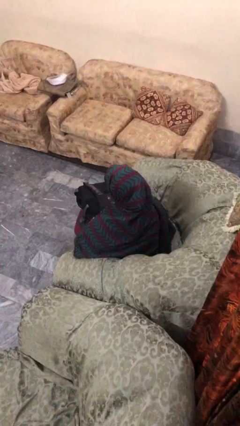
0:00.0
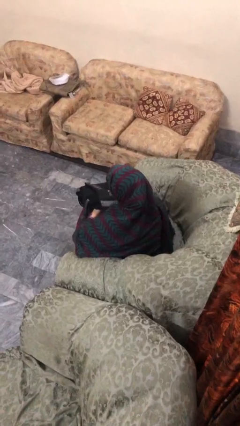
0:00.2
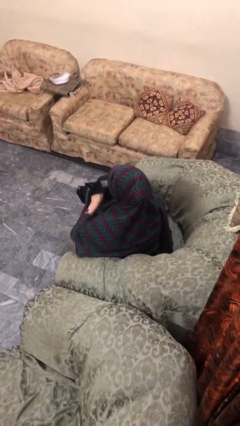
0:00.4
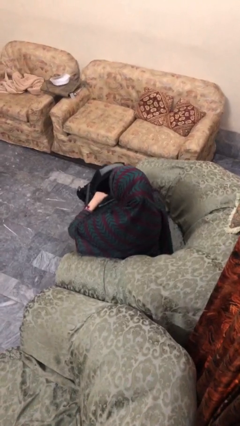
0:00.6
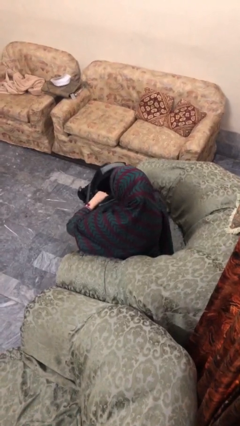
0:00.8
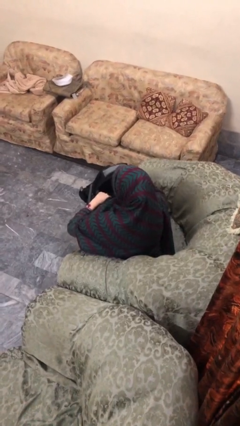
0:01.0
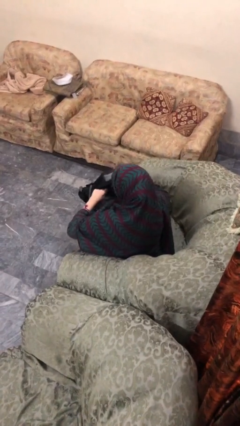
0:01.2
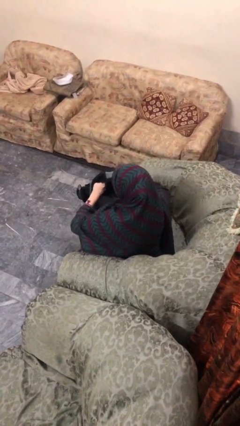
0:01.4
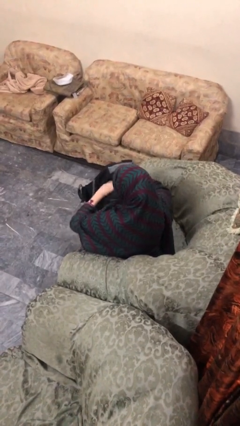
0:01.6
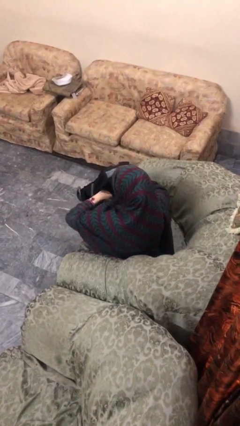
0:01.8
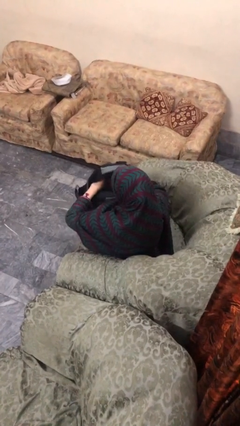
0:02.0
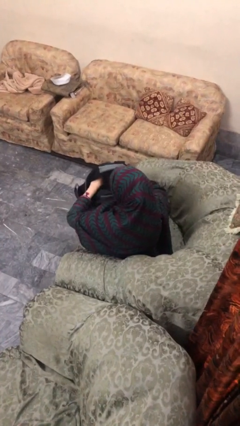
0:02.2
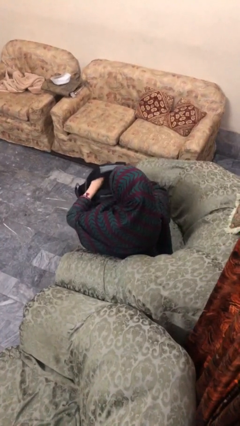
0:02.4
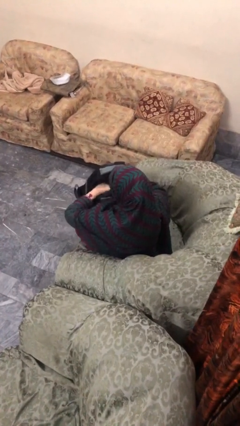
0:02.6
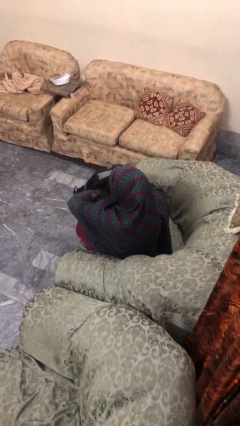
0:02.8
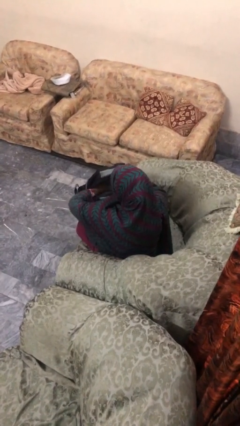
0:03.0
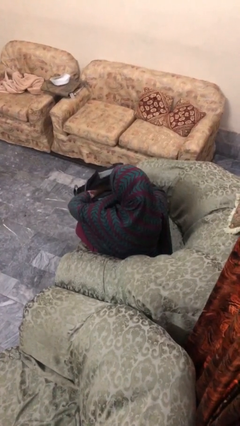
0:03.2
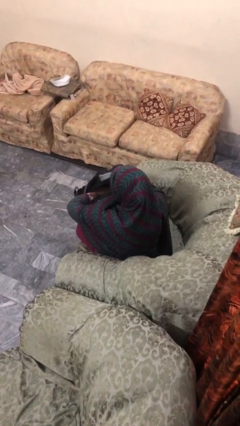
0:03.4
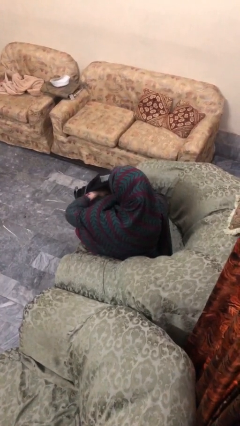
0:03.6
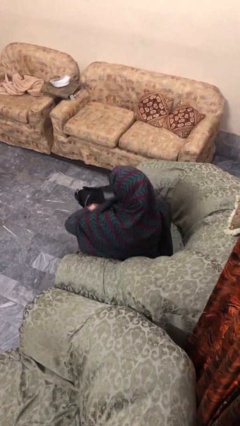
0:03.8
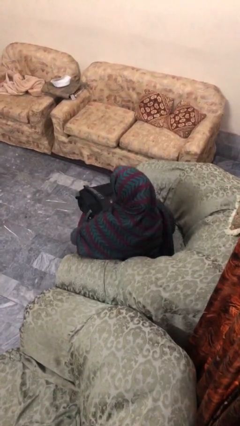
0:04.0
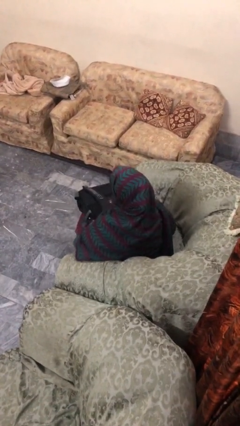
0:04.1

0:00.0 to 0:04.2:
person searches in bag

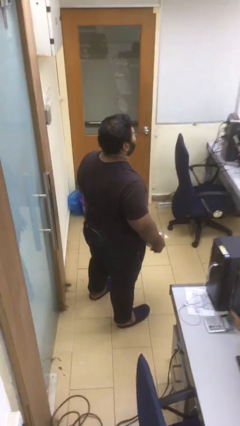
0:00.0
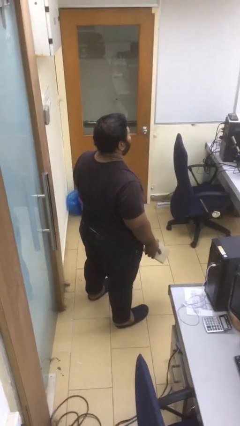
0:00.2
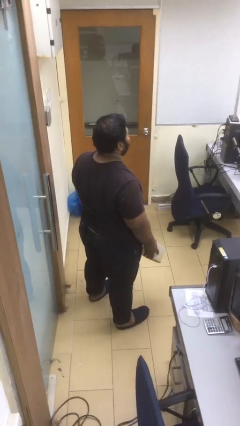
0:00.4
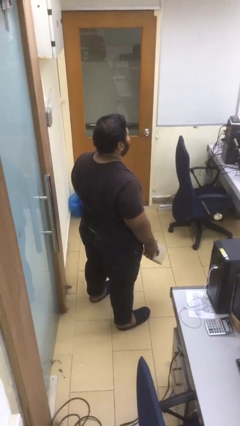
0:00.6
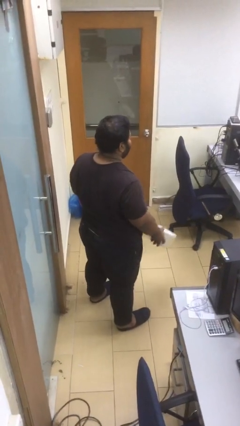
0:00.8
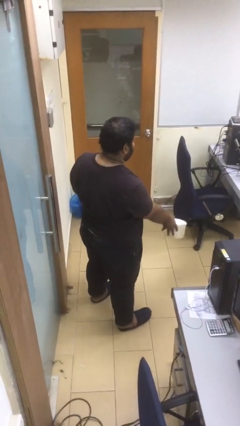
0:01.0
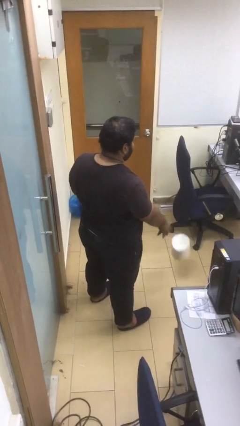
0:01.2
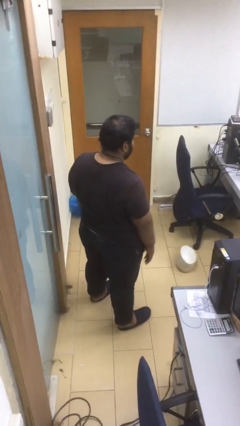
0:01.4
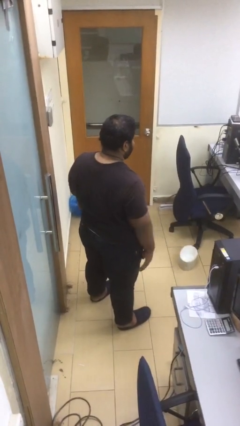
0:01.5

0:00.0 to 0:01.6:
person throws object to ground

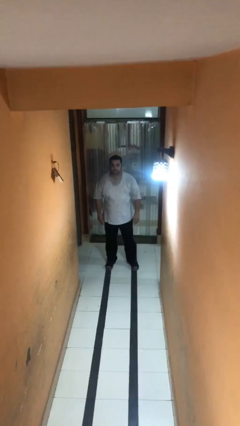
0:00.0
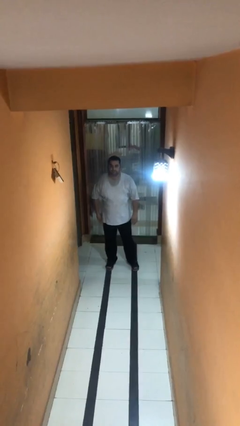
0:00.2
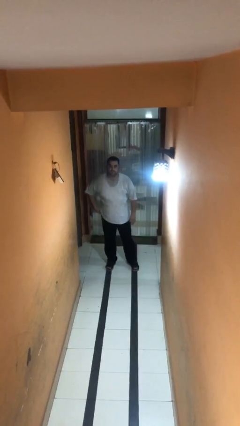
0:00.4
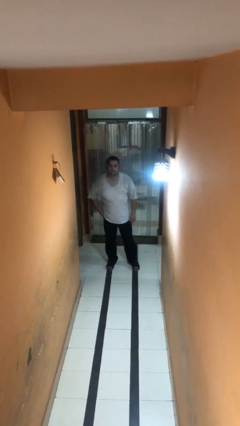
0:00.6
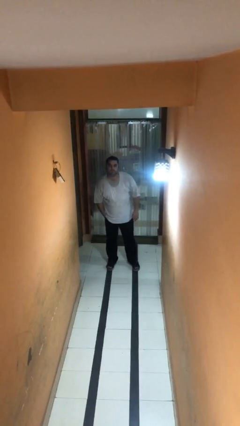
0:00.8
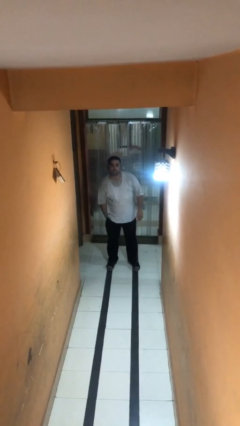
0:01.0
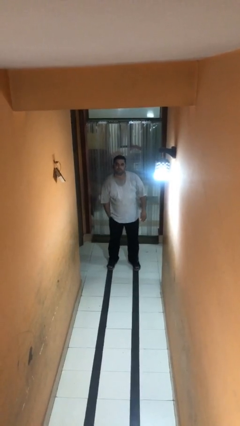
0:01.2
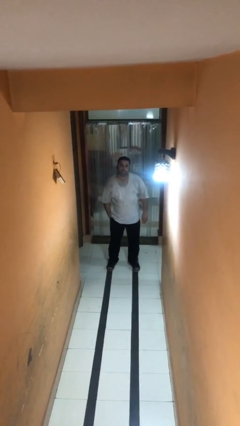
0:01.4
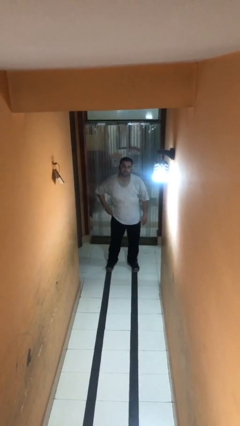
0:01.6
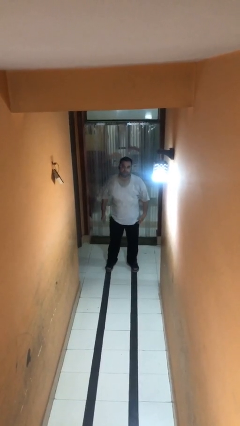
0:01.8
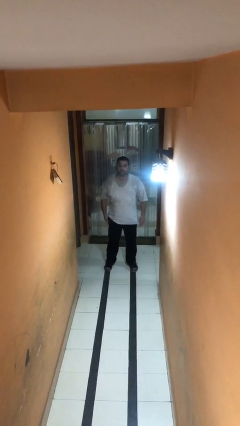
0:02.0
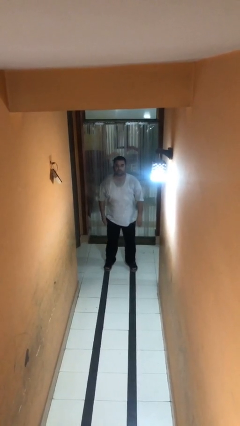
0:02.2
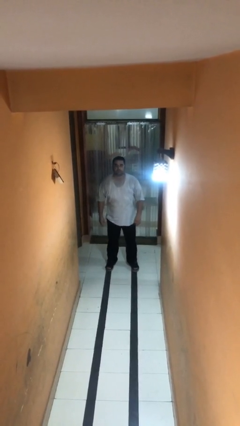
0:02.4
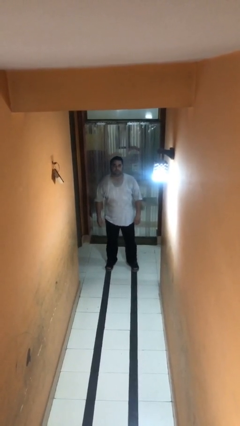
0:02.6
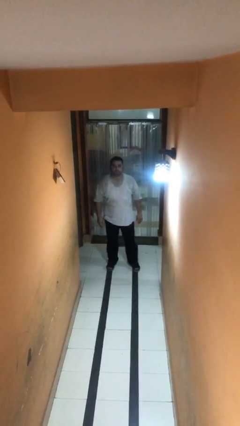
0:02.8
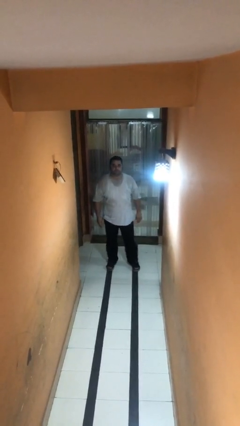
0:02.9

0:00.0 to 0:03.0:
person puts hands in back pockets

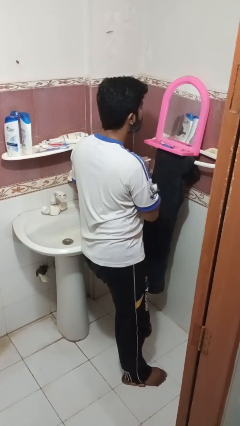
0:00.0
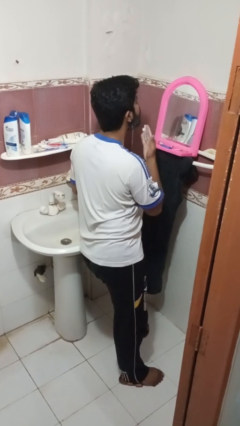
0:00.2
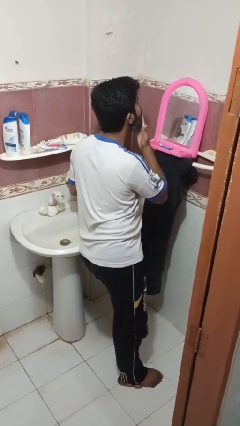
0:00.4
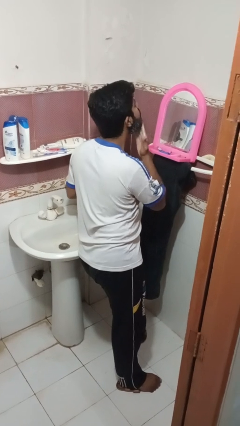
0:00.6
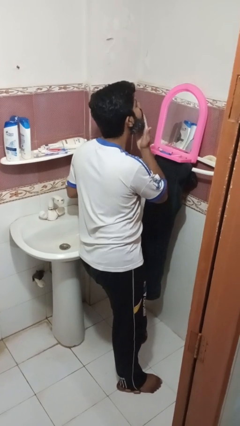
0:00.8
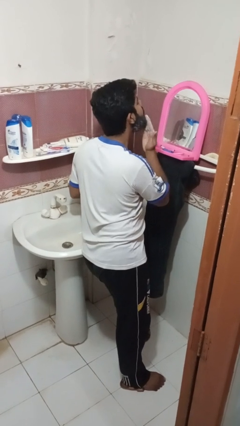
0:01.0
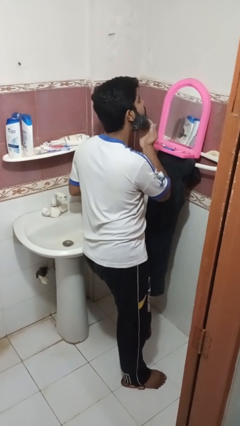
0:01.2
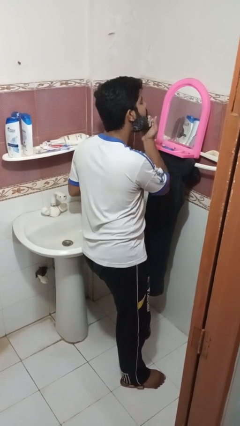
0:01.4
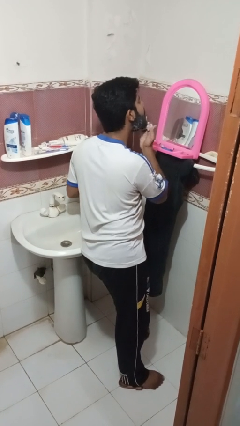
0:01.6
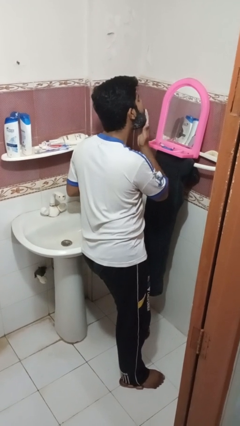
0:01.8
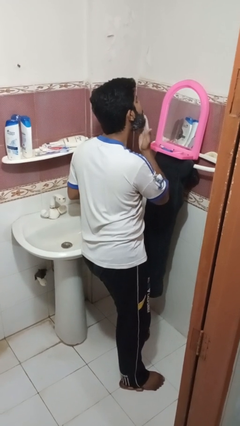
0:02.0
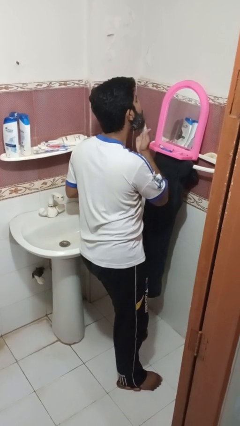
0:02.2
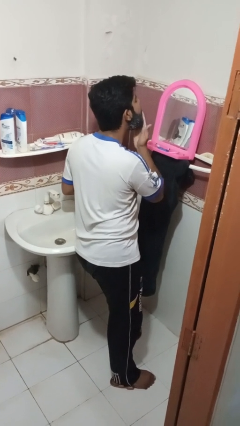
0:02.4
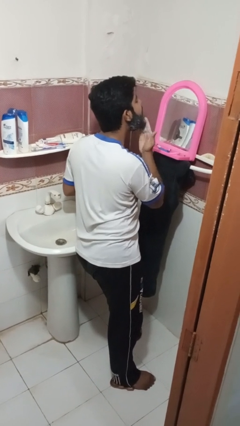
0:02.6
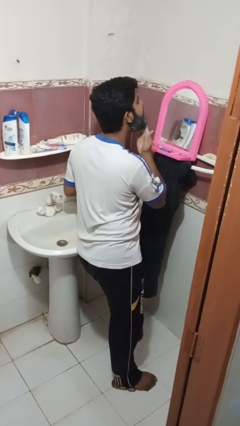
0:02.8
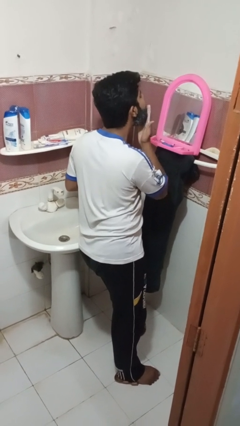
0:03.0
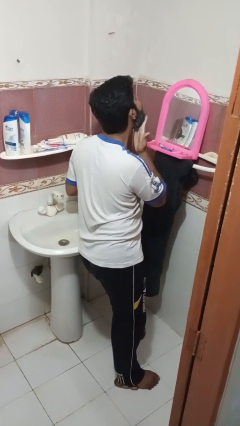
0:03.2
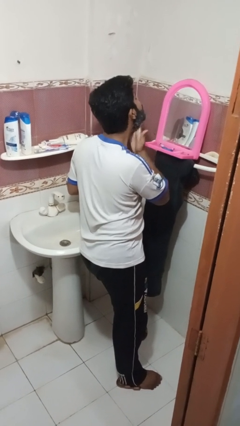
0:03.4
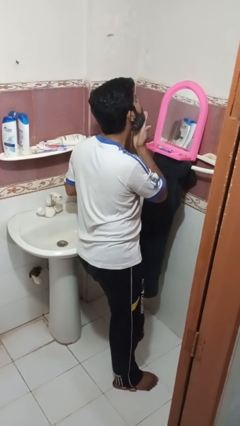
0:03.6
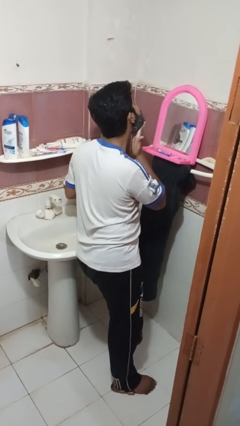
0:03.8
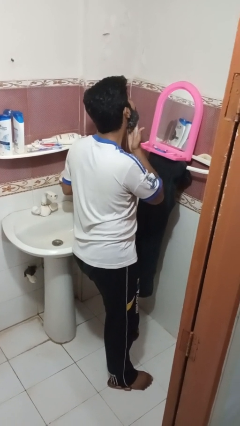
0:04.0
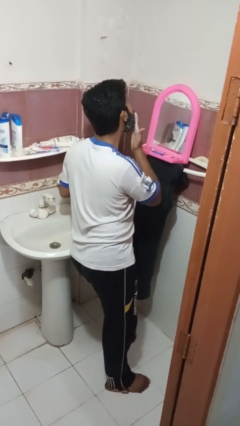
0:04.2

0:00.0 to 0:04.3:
person applies shaving cream

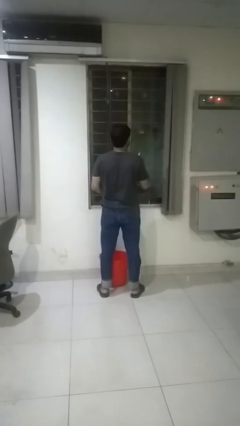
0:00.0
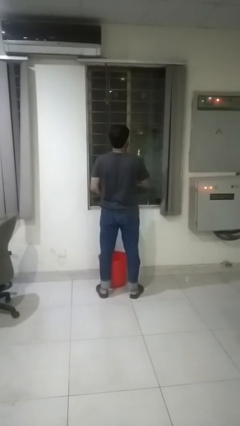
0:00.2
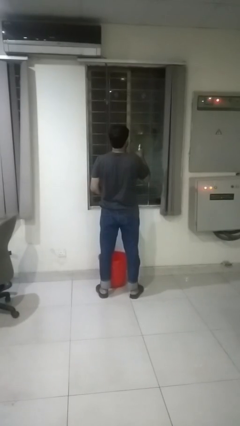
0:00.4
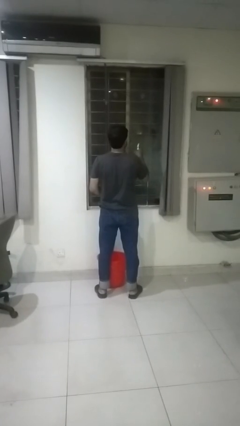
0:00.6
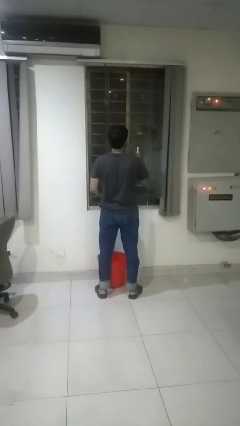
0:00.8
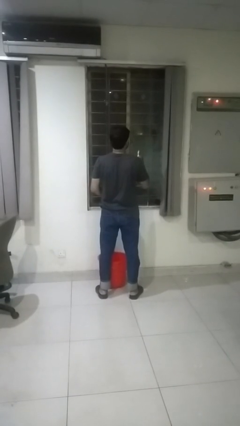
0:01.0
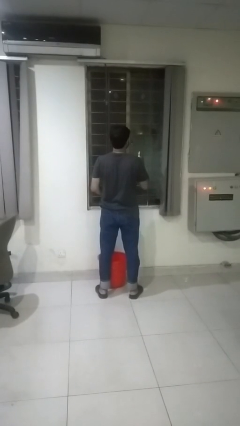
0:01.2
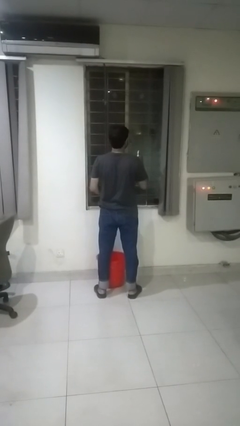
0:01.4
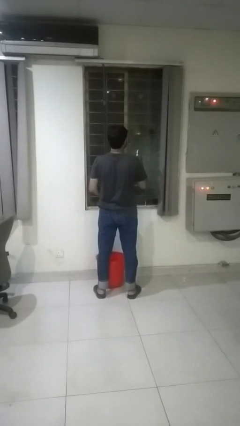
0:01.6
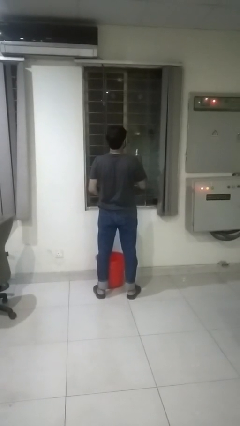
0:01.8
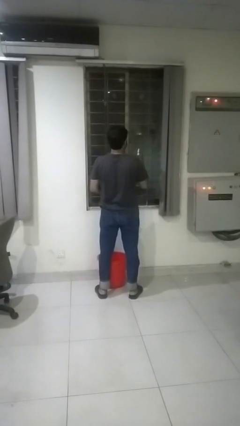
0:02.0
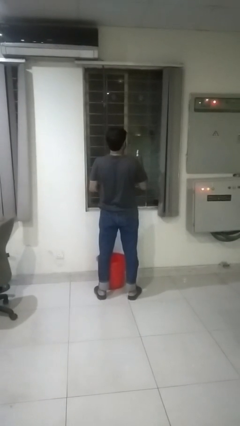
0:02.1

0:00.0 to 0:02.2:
person sprays from bottle

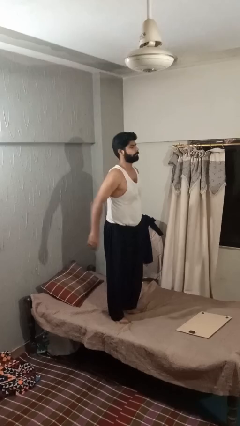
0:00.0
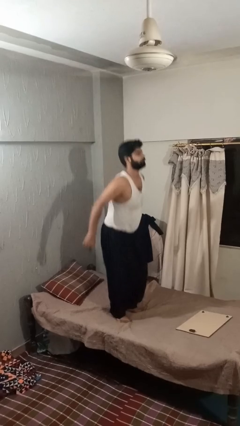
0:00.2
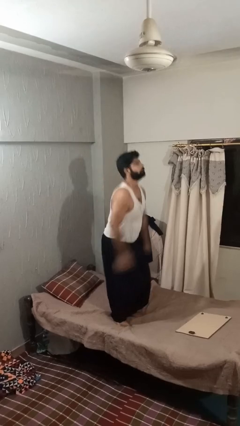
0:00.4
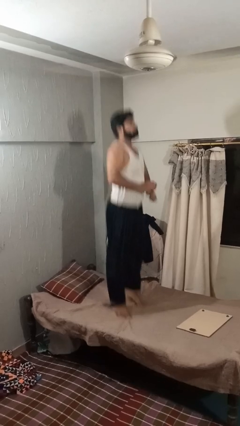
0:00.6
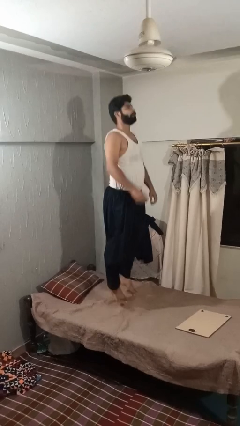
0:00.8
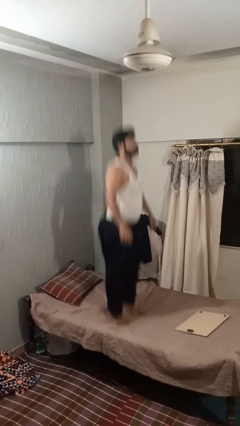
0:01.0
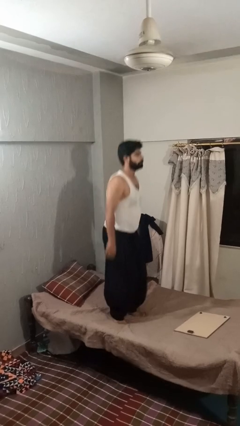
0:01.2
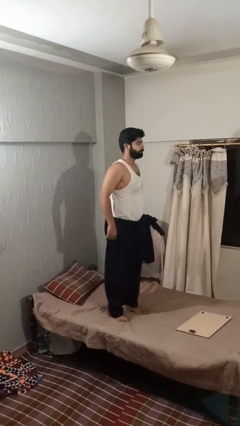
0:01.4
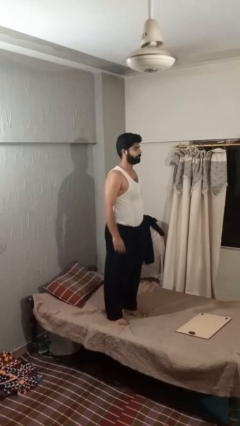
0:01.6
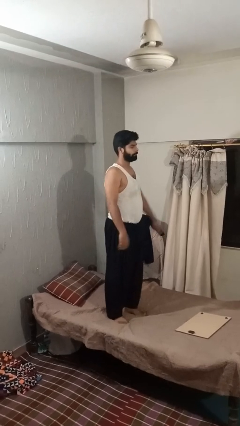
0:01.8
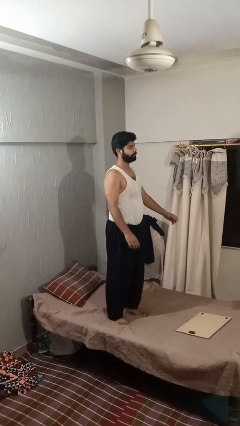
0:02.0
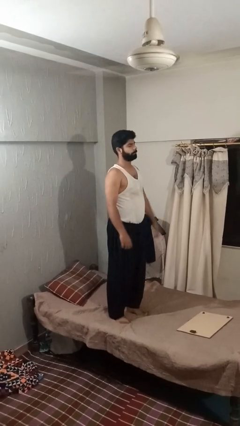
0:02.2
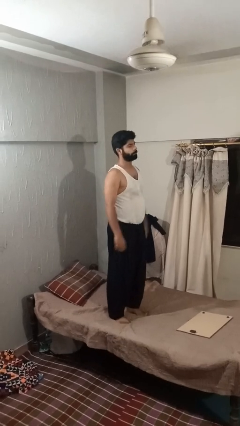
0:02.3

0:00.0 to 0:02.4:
person jumps on bed

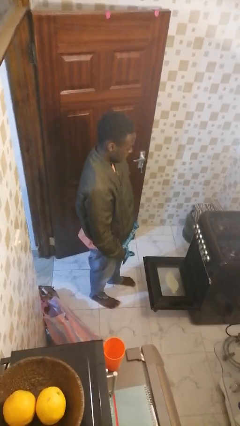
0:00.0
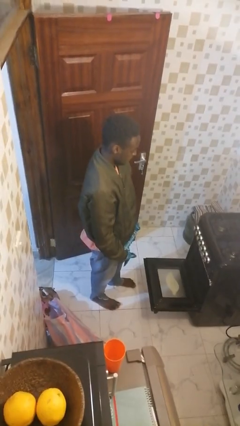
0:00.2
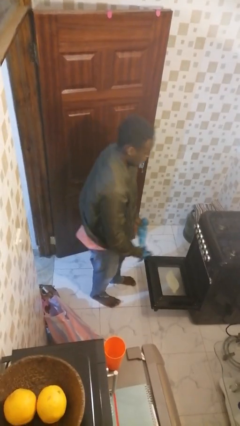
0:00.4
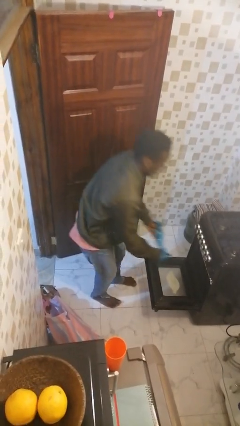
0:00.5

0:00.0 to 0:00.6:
person puts object into oven
